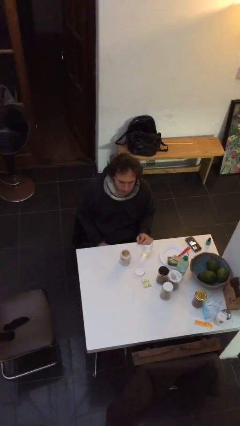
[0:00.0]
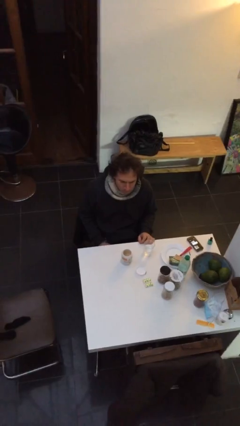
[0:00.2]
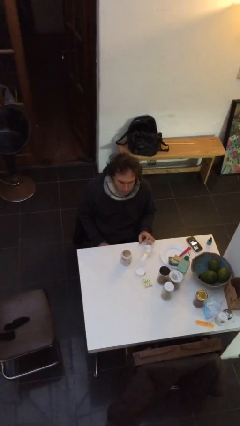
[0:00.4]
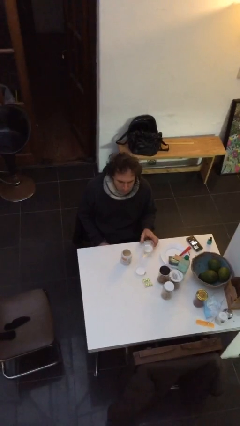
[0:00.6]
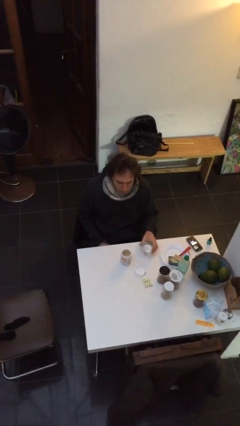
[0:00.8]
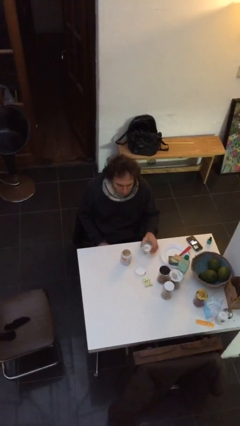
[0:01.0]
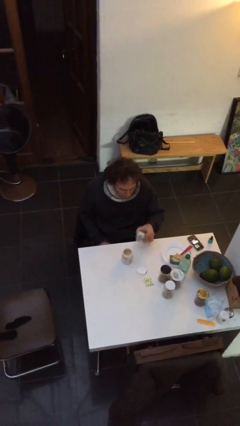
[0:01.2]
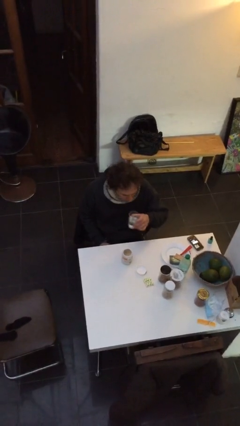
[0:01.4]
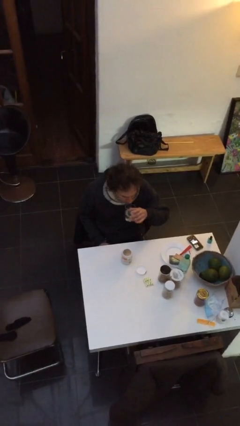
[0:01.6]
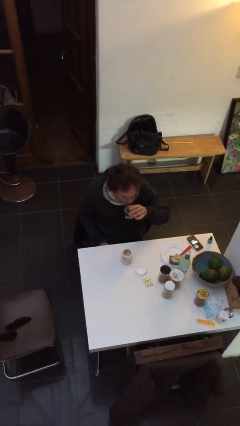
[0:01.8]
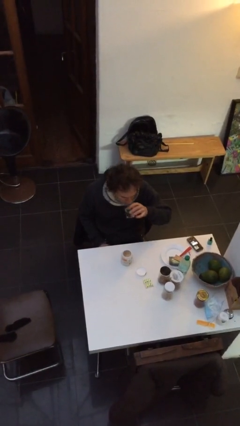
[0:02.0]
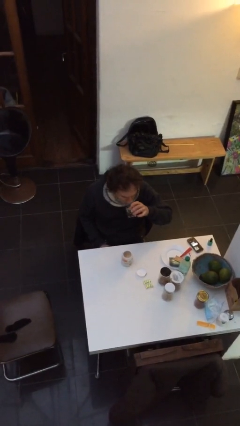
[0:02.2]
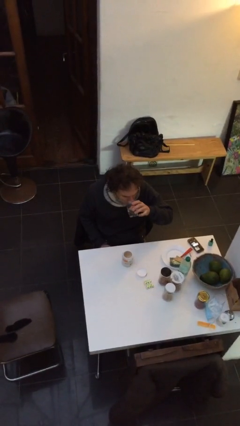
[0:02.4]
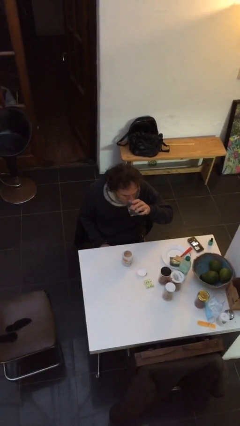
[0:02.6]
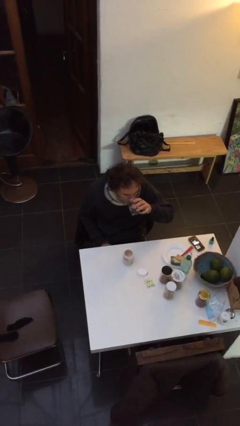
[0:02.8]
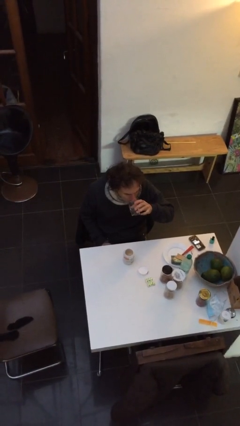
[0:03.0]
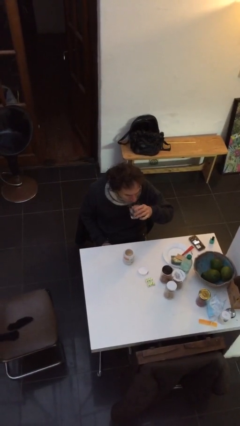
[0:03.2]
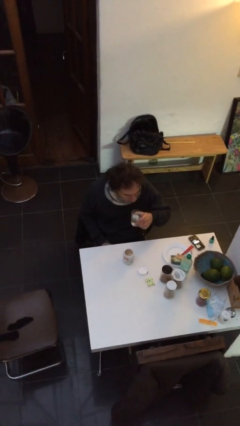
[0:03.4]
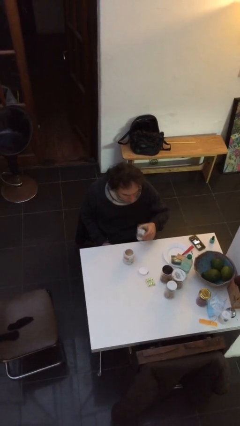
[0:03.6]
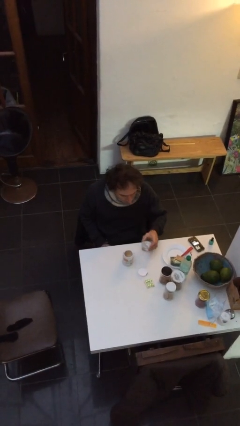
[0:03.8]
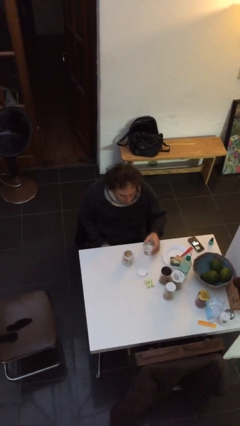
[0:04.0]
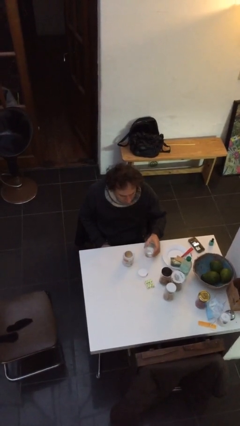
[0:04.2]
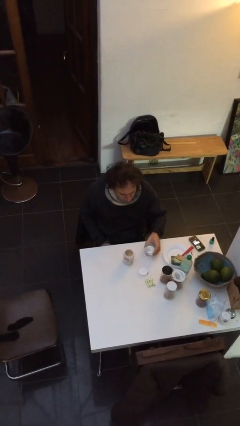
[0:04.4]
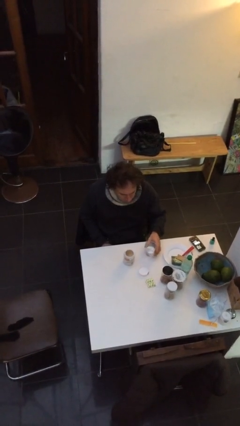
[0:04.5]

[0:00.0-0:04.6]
person drinks from cup

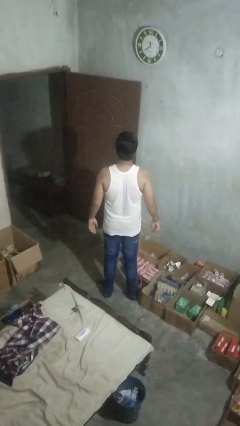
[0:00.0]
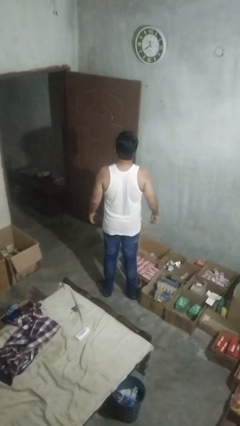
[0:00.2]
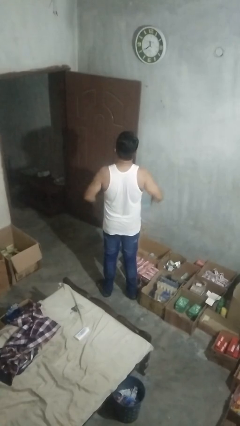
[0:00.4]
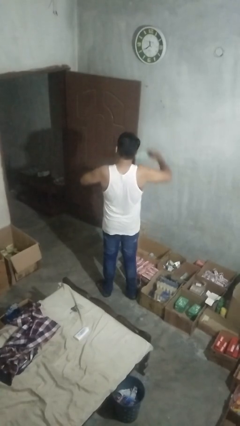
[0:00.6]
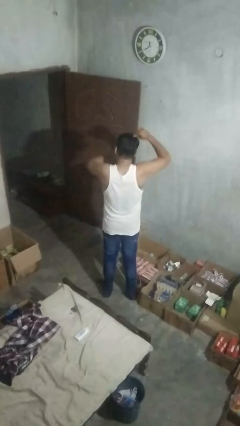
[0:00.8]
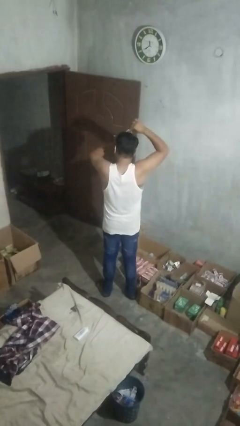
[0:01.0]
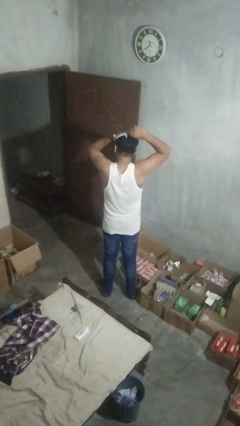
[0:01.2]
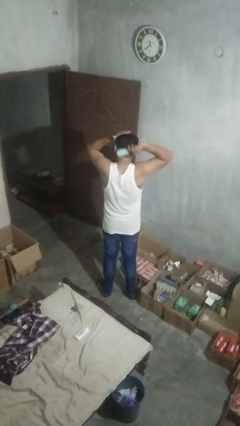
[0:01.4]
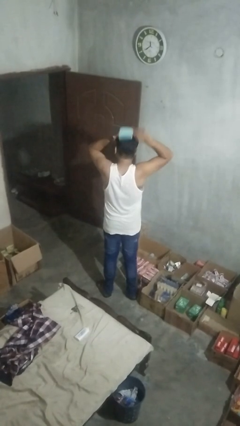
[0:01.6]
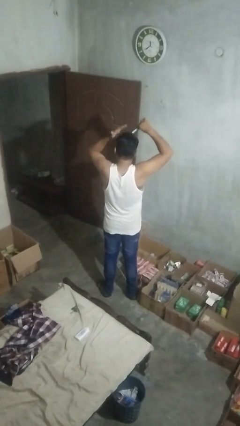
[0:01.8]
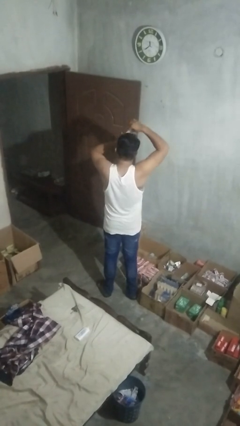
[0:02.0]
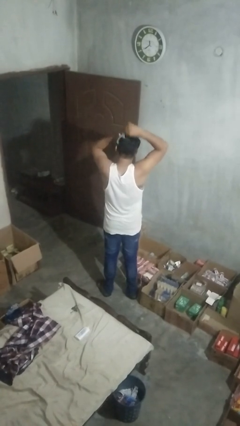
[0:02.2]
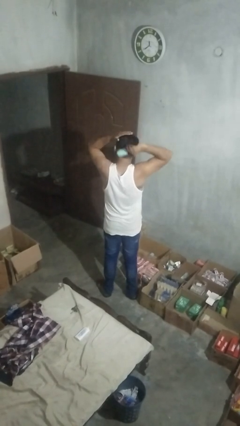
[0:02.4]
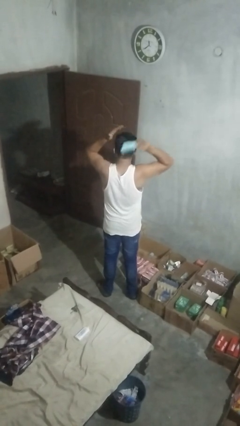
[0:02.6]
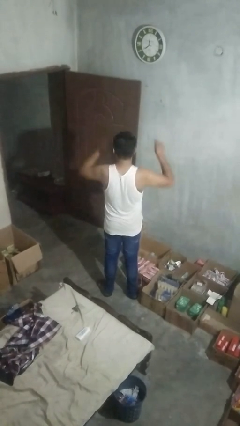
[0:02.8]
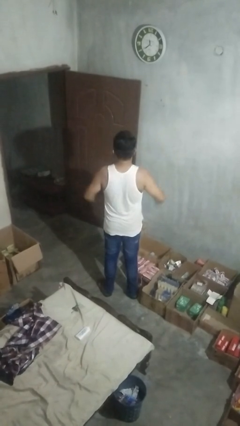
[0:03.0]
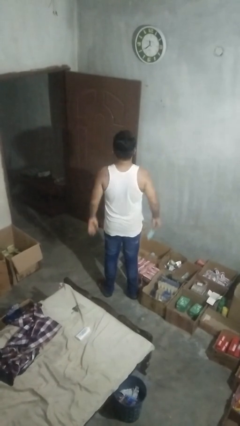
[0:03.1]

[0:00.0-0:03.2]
person brushes hair

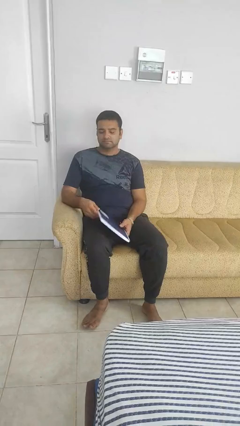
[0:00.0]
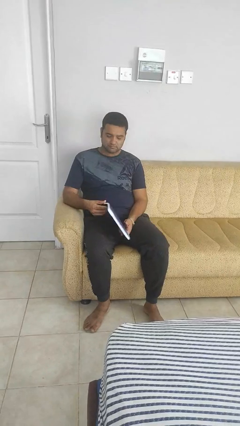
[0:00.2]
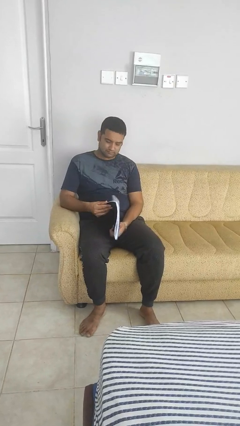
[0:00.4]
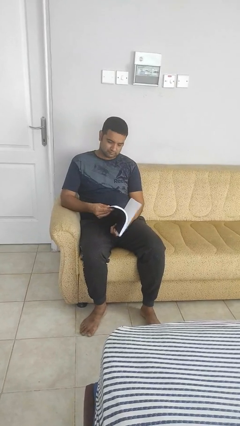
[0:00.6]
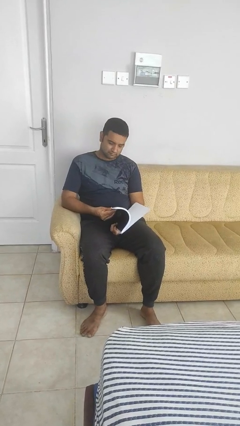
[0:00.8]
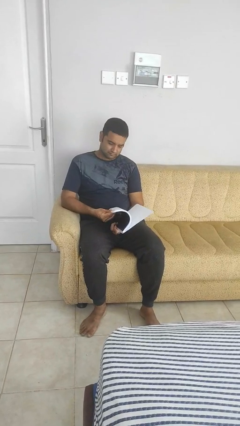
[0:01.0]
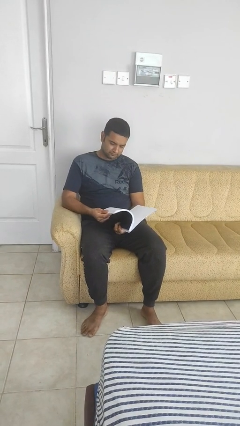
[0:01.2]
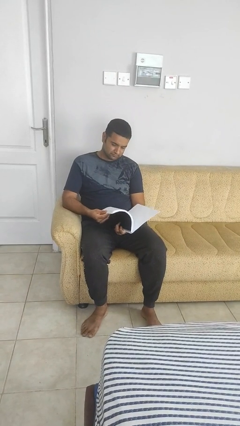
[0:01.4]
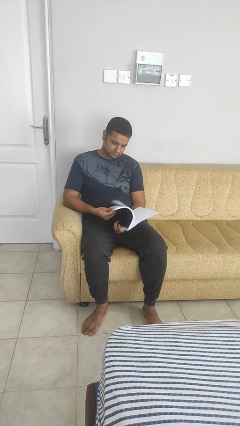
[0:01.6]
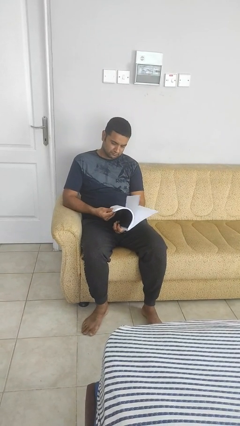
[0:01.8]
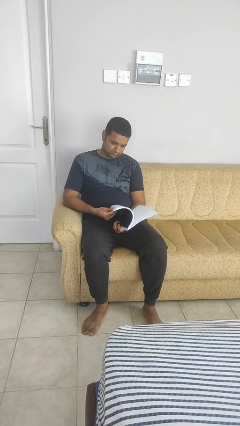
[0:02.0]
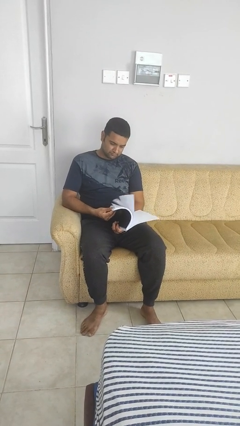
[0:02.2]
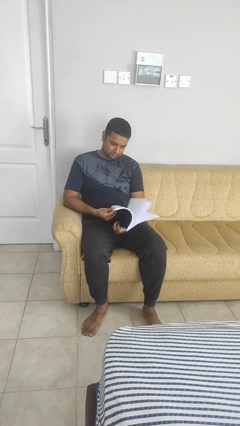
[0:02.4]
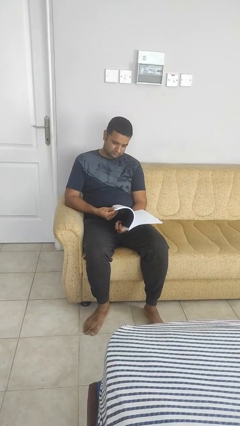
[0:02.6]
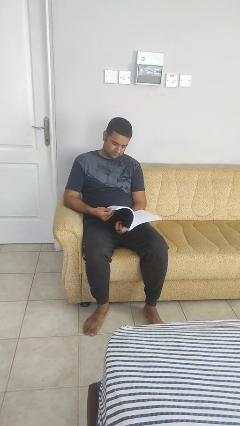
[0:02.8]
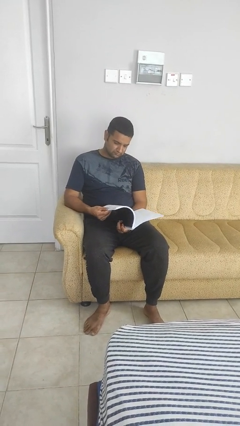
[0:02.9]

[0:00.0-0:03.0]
person reads book

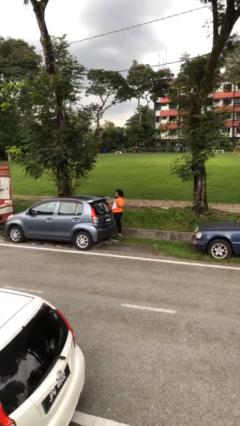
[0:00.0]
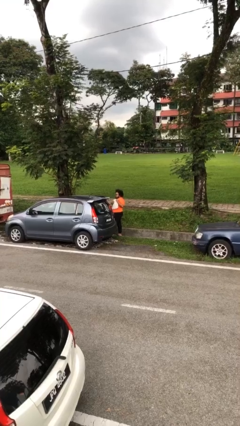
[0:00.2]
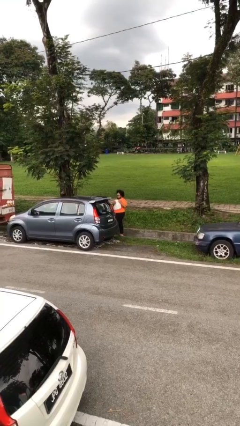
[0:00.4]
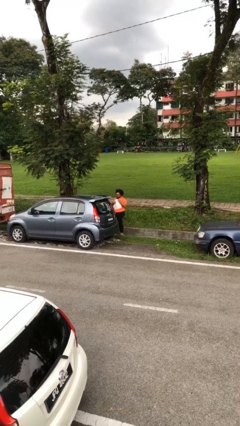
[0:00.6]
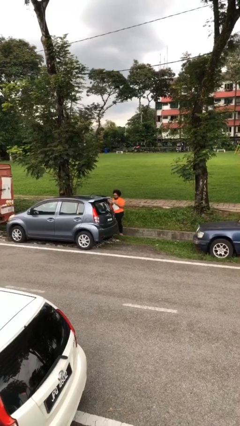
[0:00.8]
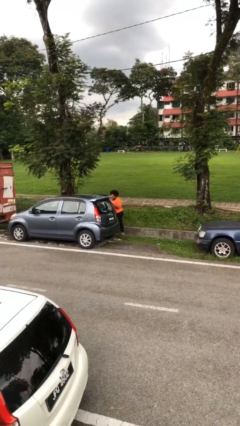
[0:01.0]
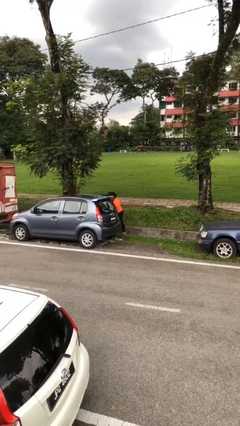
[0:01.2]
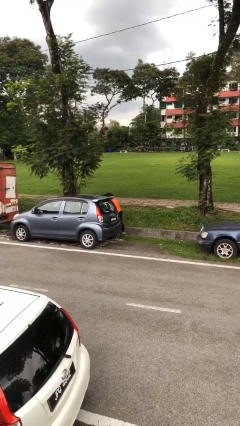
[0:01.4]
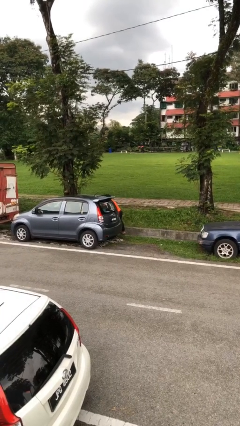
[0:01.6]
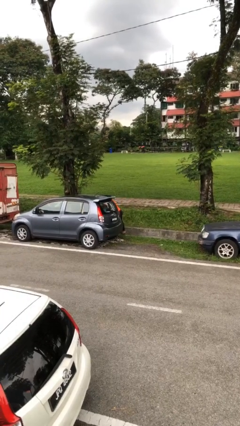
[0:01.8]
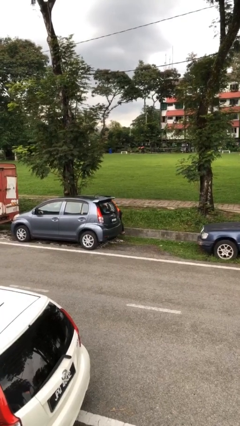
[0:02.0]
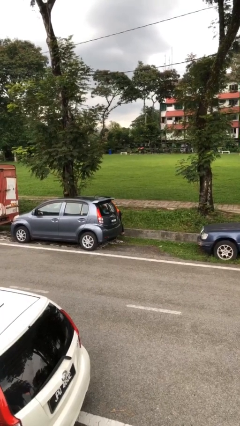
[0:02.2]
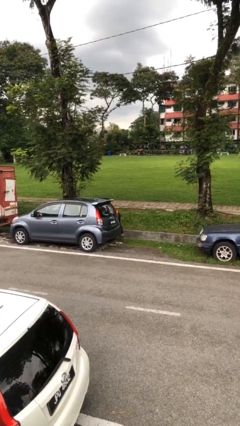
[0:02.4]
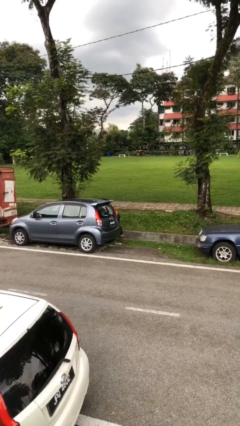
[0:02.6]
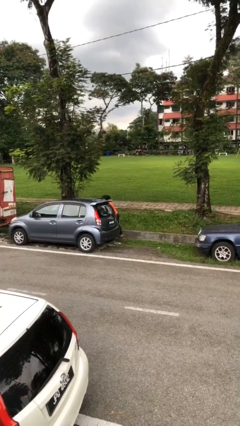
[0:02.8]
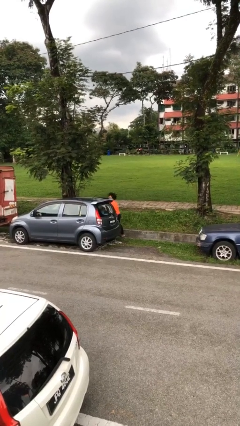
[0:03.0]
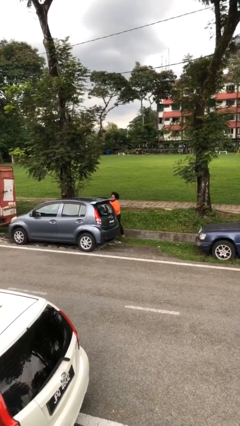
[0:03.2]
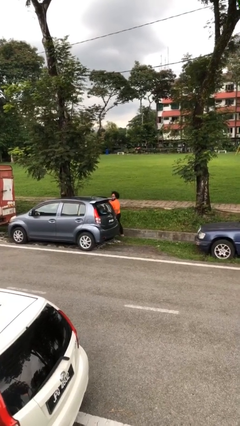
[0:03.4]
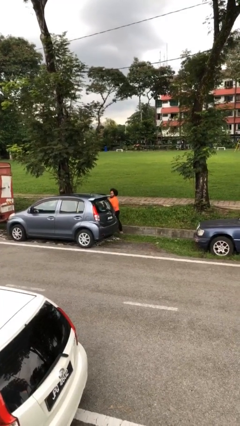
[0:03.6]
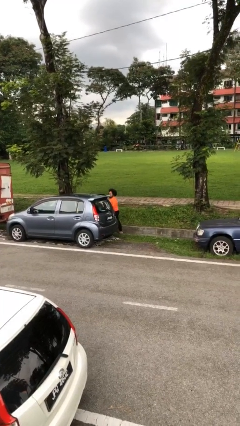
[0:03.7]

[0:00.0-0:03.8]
person loads car

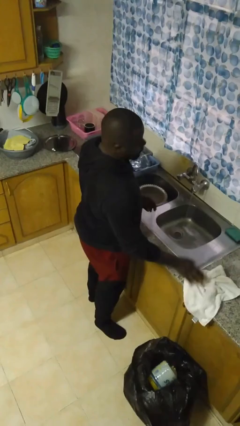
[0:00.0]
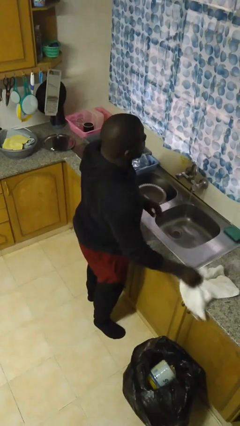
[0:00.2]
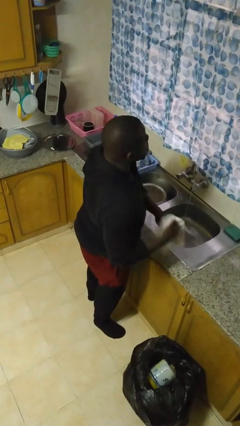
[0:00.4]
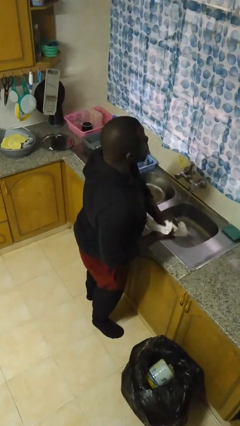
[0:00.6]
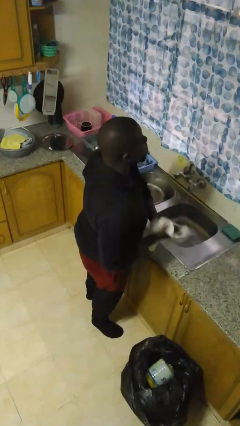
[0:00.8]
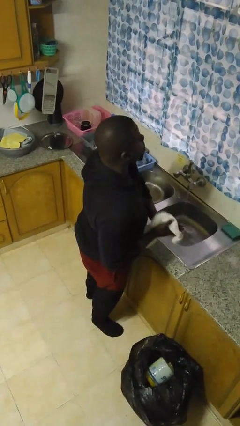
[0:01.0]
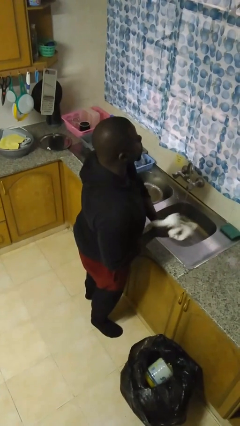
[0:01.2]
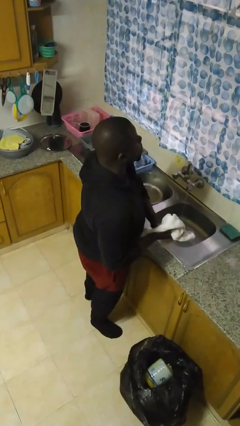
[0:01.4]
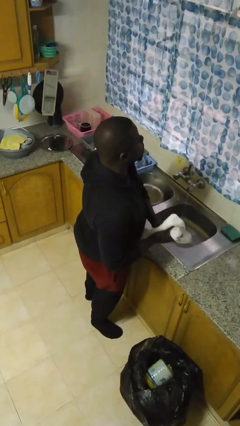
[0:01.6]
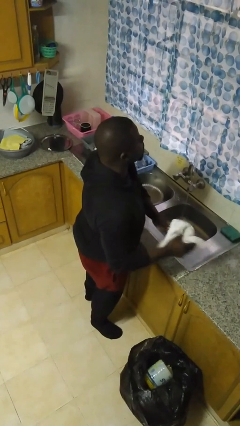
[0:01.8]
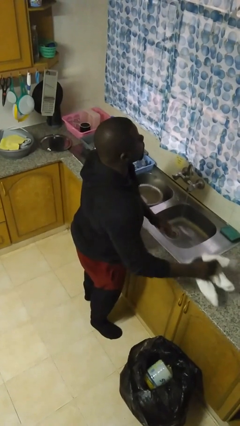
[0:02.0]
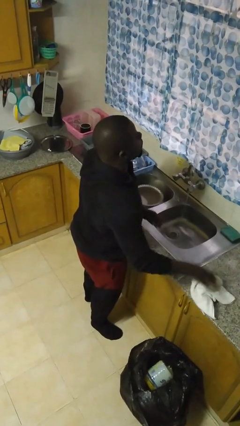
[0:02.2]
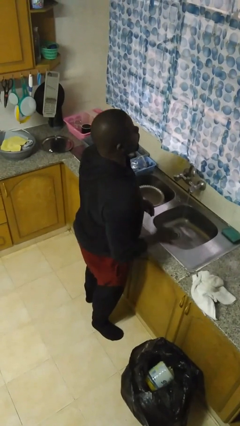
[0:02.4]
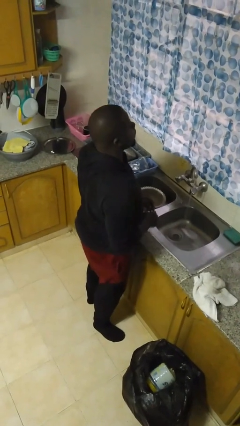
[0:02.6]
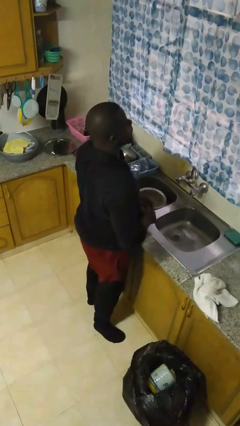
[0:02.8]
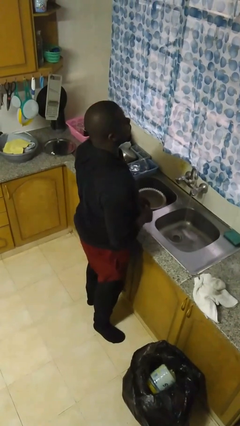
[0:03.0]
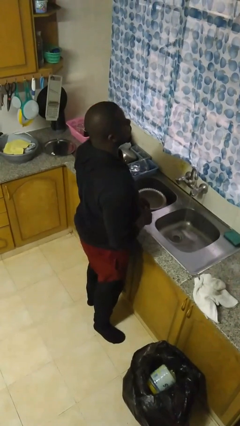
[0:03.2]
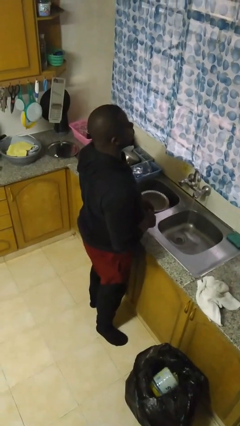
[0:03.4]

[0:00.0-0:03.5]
person dries hands with towel
